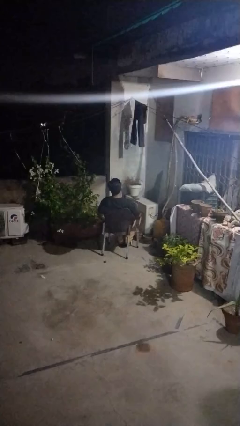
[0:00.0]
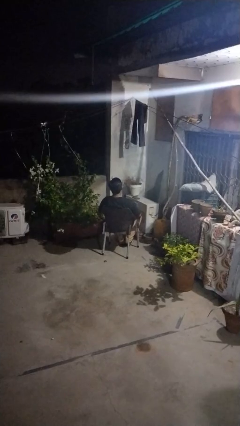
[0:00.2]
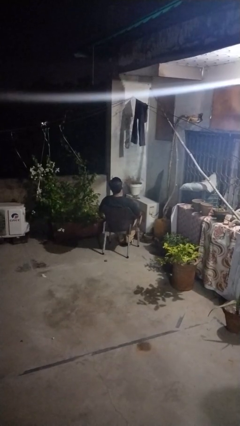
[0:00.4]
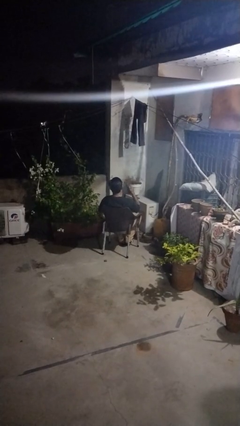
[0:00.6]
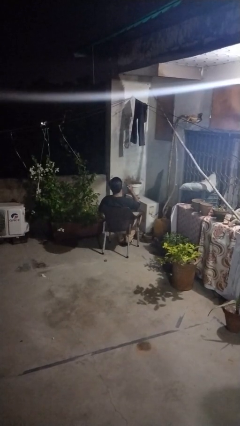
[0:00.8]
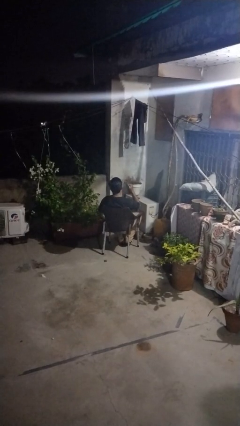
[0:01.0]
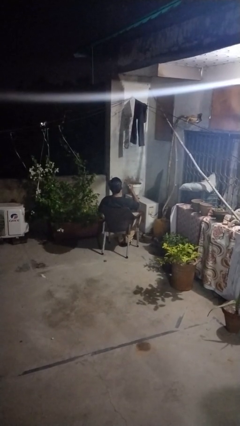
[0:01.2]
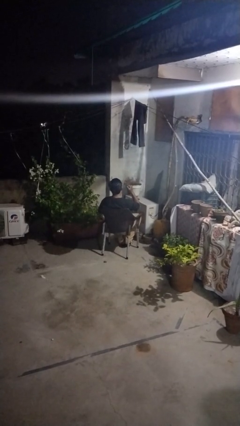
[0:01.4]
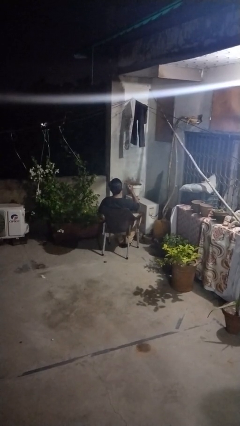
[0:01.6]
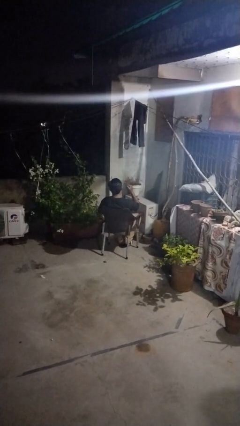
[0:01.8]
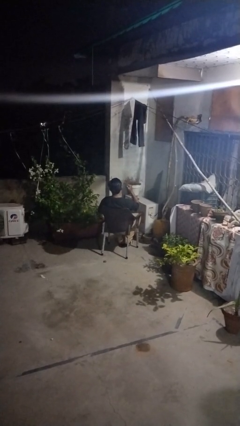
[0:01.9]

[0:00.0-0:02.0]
person gestures behind me

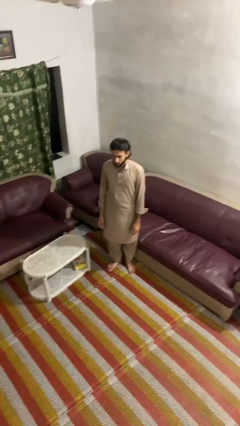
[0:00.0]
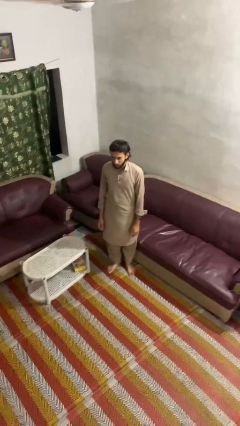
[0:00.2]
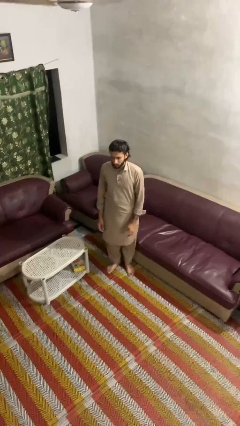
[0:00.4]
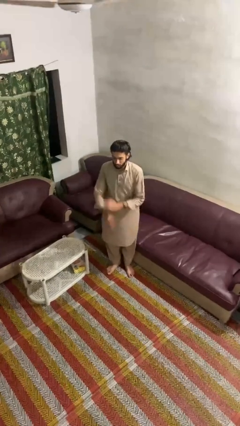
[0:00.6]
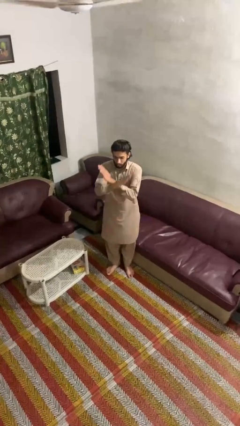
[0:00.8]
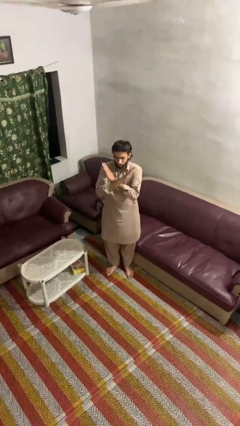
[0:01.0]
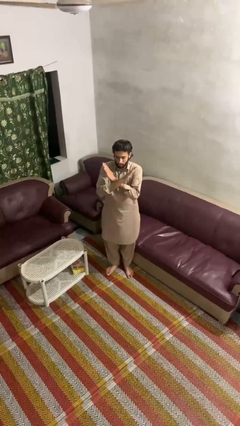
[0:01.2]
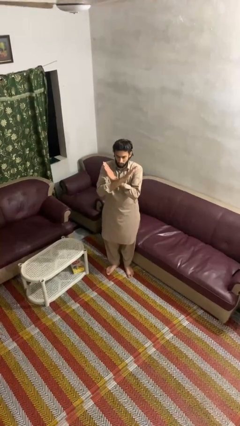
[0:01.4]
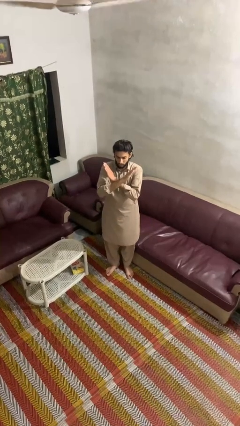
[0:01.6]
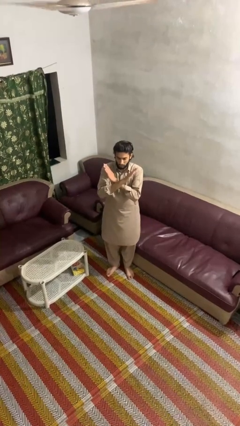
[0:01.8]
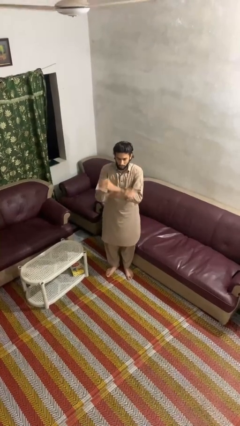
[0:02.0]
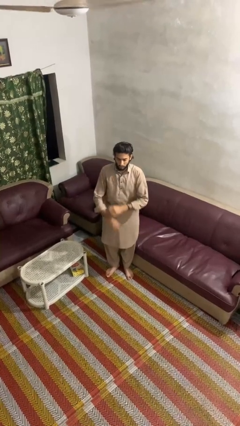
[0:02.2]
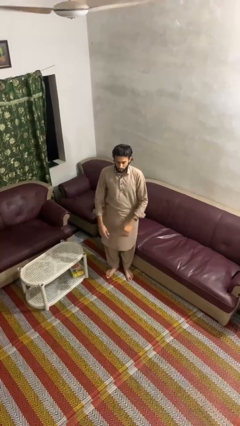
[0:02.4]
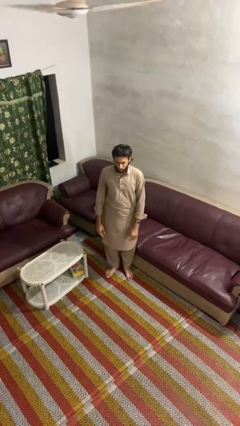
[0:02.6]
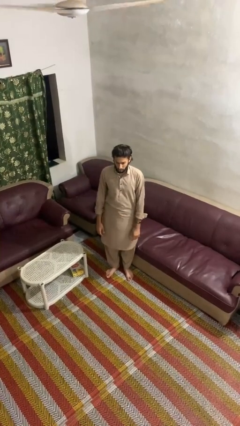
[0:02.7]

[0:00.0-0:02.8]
person gestures arms x

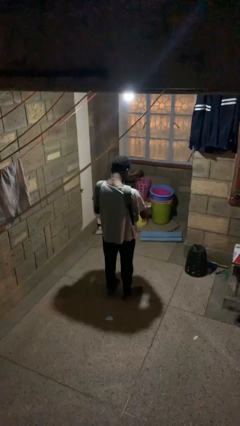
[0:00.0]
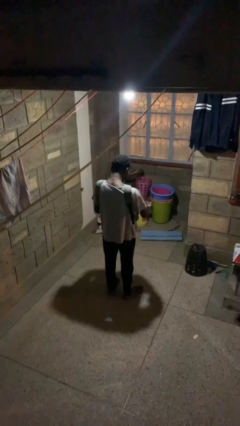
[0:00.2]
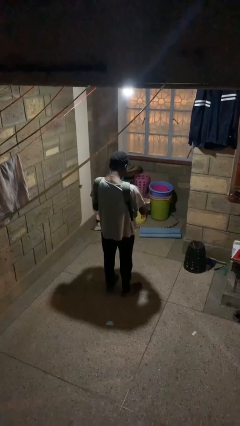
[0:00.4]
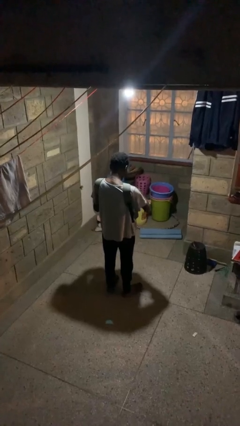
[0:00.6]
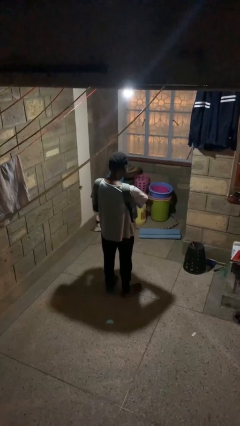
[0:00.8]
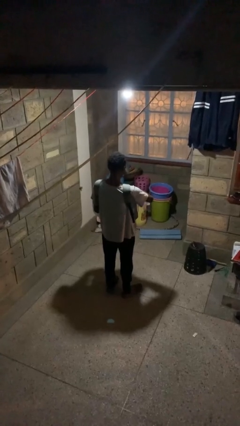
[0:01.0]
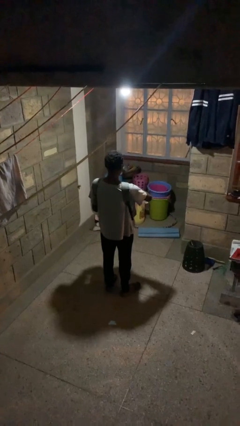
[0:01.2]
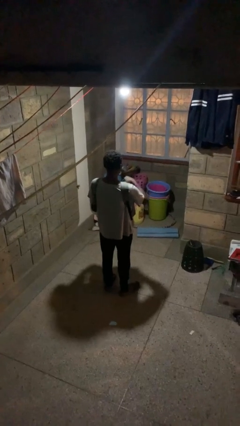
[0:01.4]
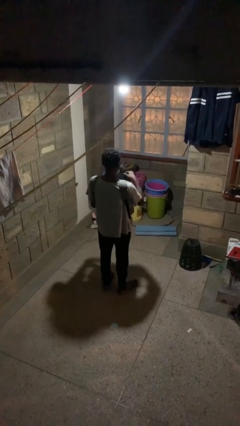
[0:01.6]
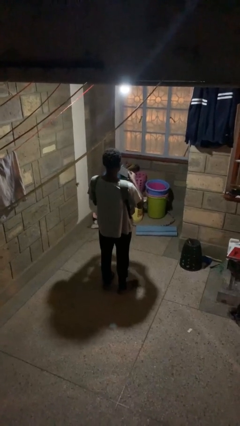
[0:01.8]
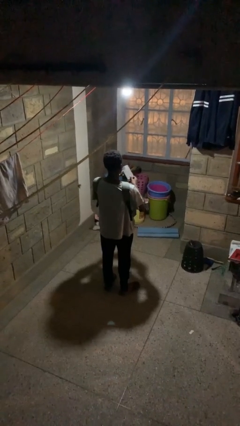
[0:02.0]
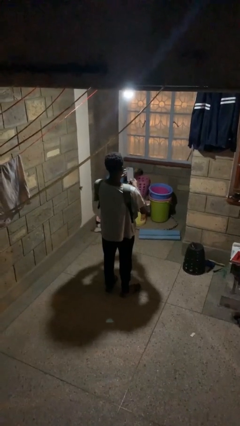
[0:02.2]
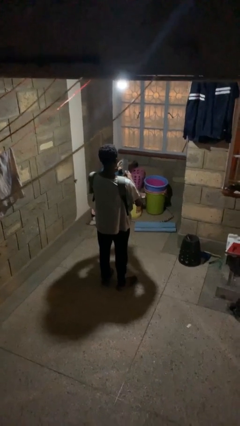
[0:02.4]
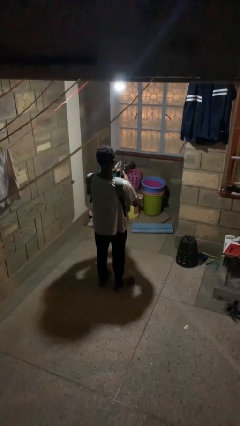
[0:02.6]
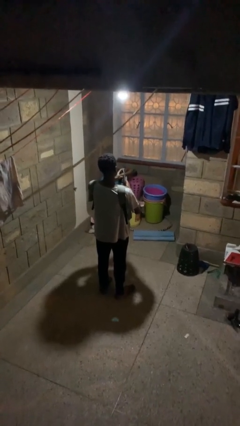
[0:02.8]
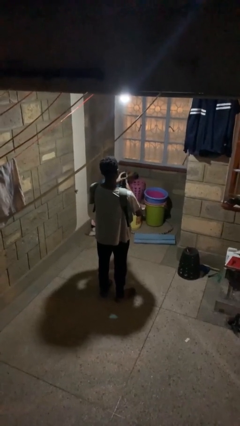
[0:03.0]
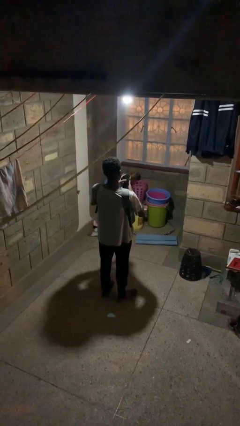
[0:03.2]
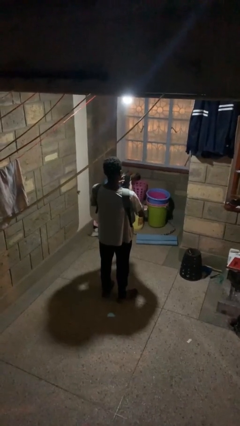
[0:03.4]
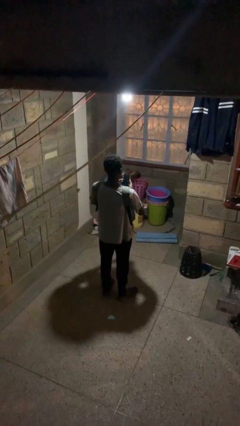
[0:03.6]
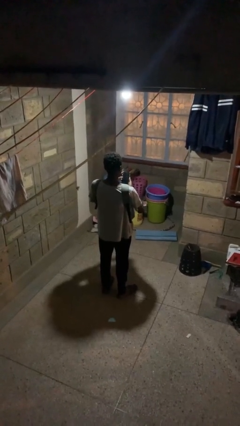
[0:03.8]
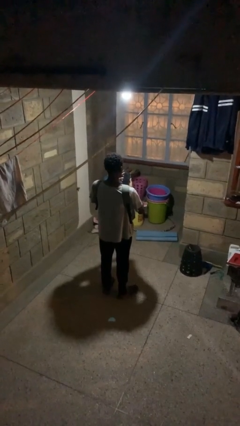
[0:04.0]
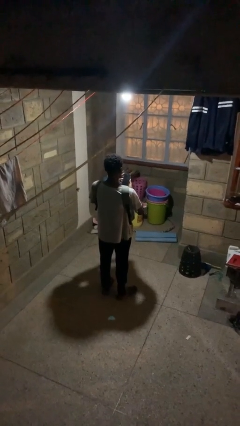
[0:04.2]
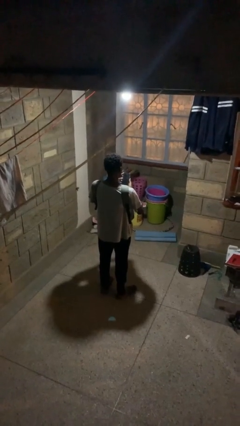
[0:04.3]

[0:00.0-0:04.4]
person takes object from backpack

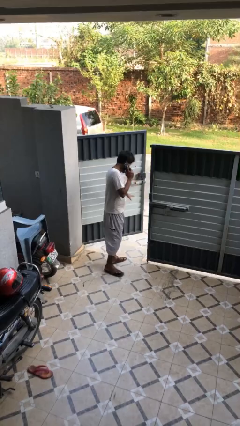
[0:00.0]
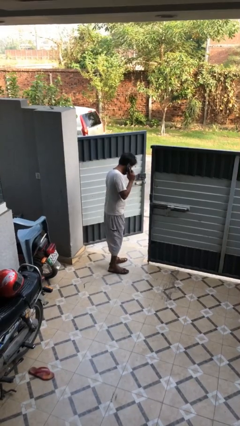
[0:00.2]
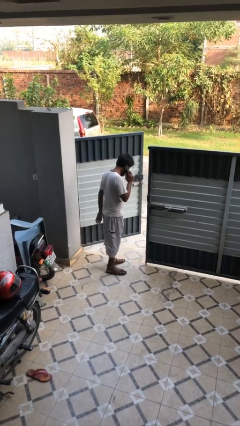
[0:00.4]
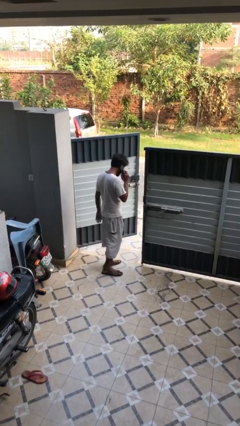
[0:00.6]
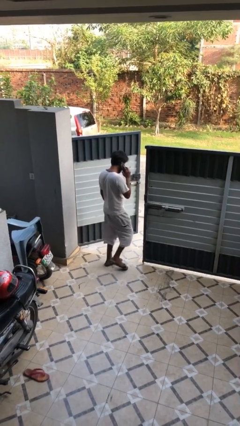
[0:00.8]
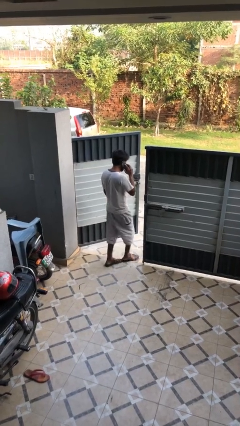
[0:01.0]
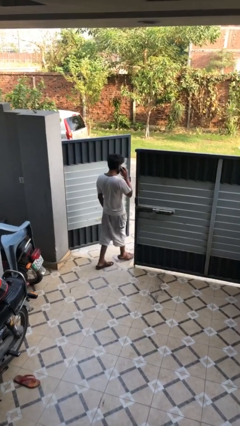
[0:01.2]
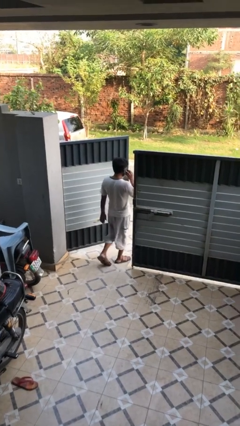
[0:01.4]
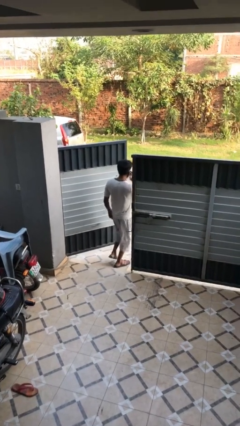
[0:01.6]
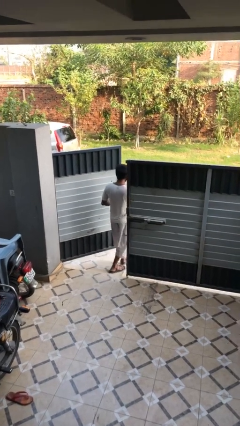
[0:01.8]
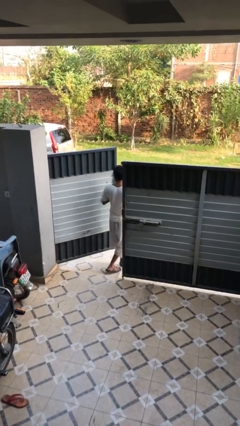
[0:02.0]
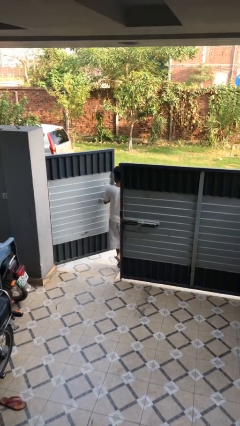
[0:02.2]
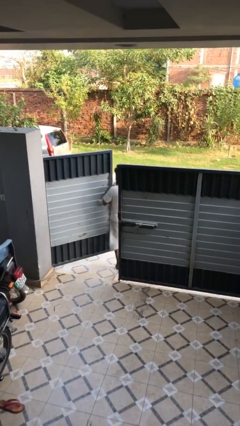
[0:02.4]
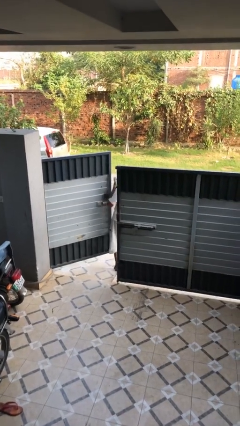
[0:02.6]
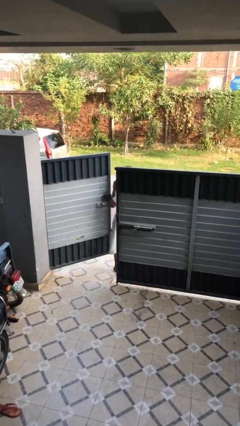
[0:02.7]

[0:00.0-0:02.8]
person exits scene through structure

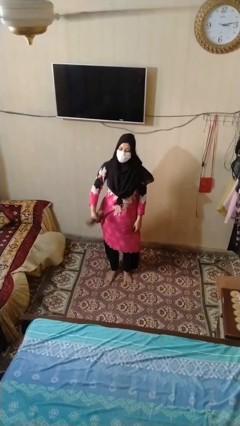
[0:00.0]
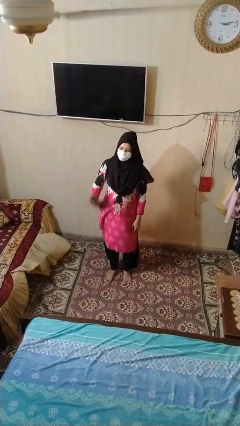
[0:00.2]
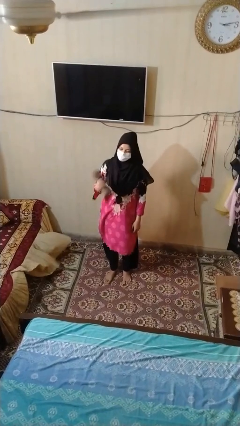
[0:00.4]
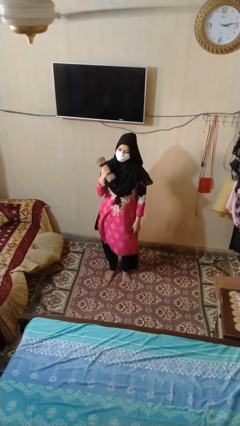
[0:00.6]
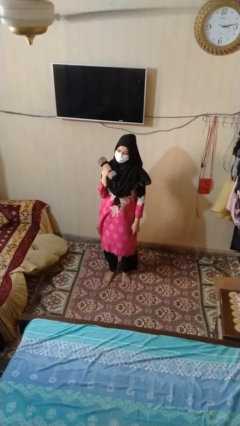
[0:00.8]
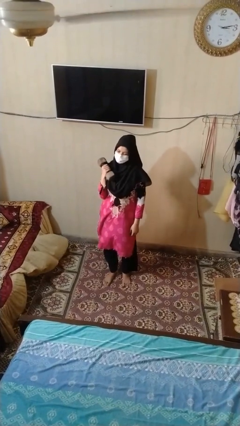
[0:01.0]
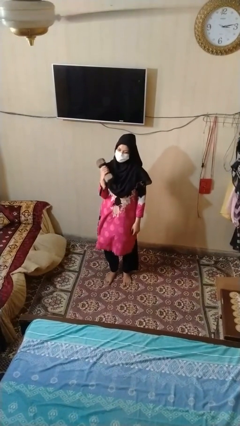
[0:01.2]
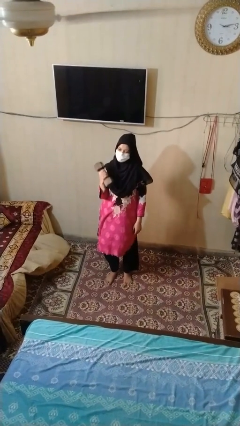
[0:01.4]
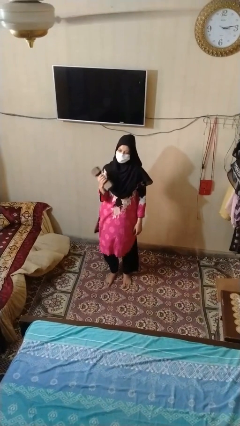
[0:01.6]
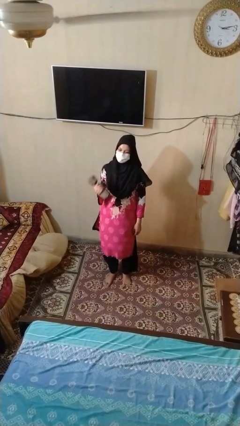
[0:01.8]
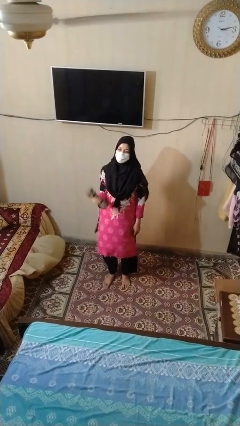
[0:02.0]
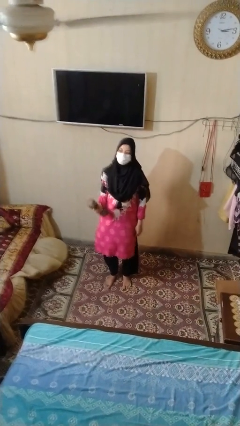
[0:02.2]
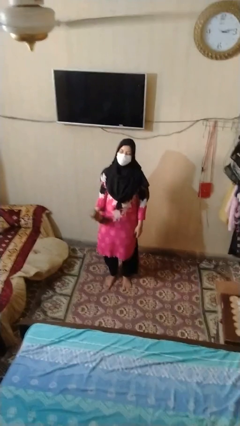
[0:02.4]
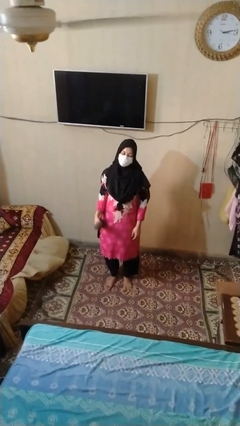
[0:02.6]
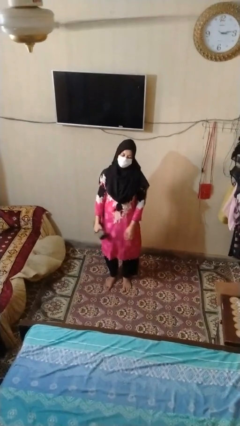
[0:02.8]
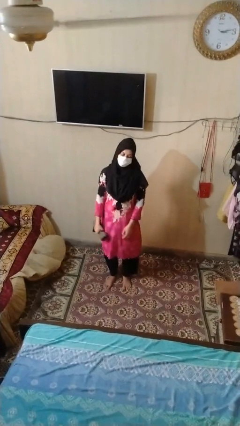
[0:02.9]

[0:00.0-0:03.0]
person lifts dumbbells

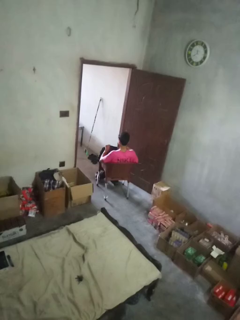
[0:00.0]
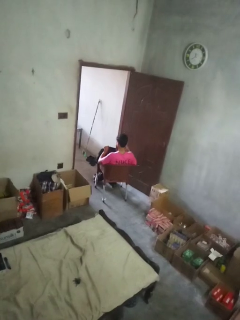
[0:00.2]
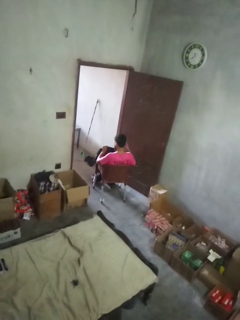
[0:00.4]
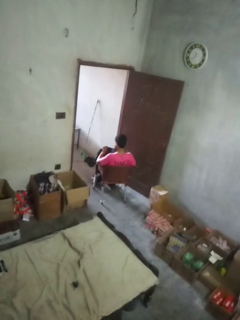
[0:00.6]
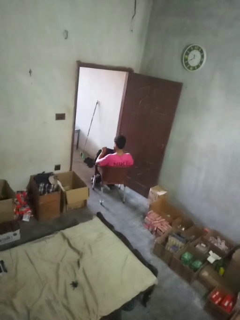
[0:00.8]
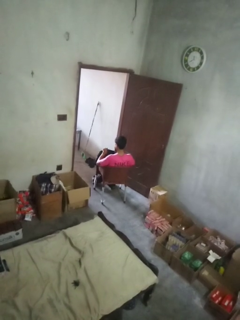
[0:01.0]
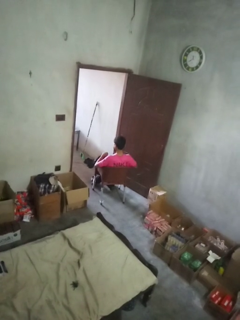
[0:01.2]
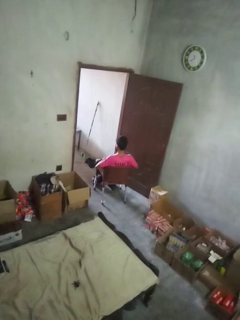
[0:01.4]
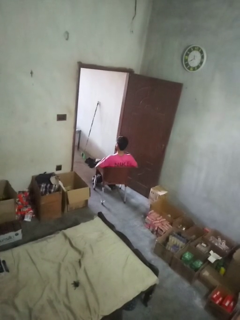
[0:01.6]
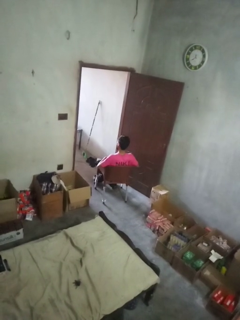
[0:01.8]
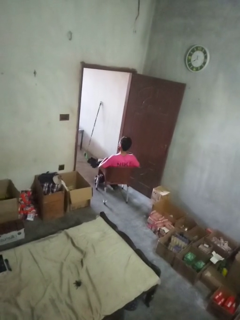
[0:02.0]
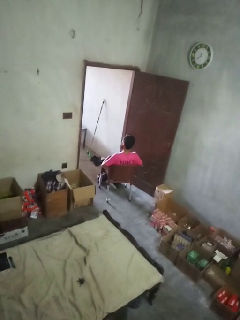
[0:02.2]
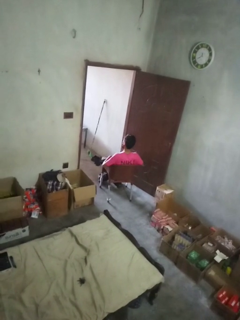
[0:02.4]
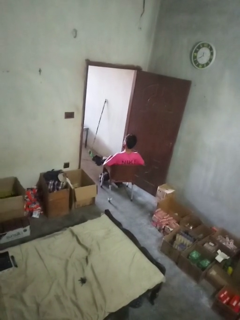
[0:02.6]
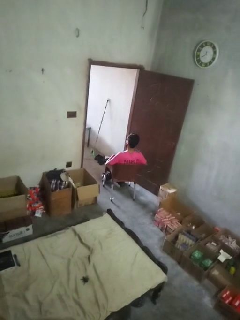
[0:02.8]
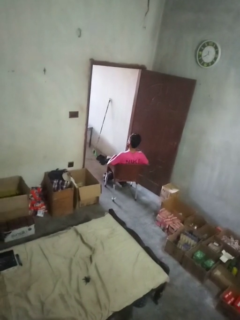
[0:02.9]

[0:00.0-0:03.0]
person puts object into backpack
